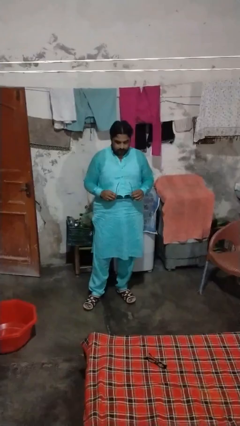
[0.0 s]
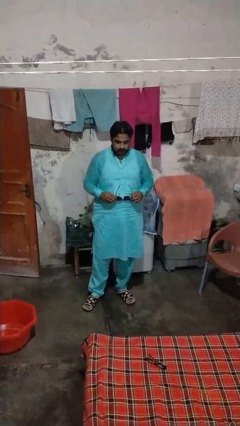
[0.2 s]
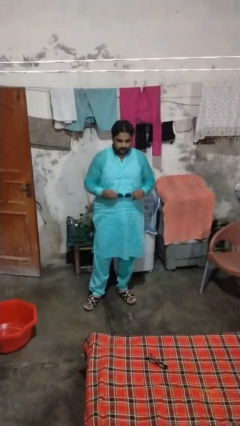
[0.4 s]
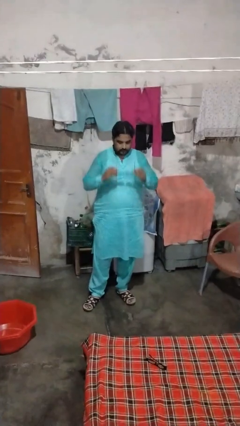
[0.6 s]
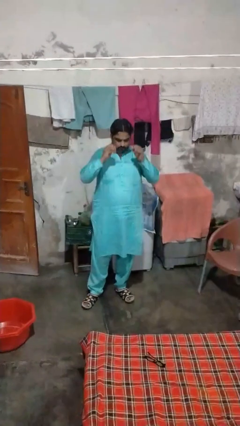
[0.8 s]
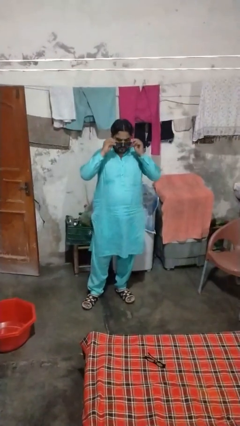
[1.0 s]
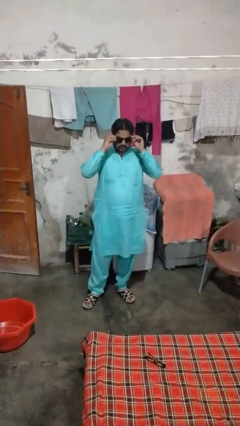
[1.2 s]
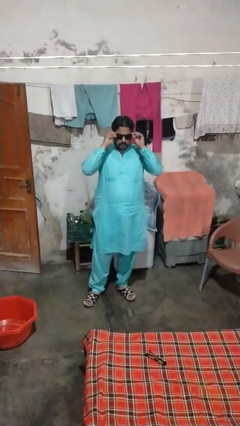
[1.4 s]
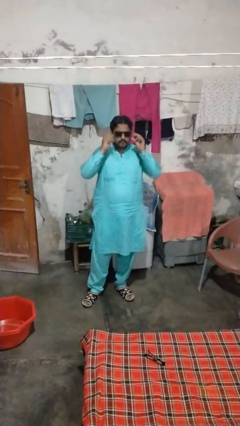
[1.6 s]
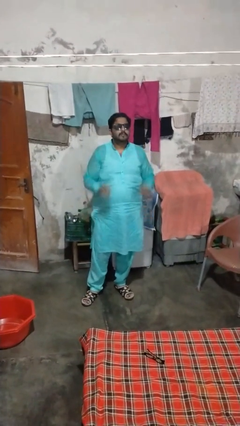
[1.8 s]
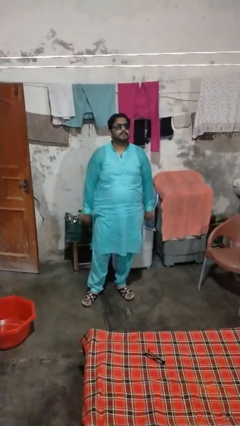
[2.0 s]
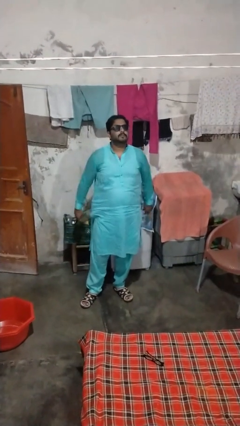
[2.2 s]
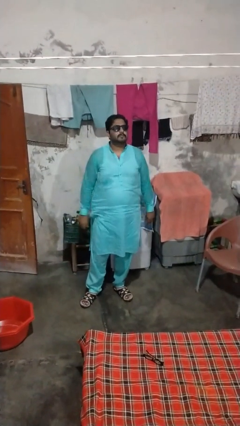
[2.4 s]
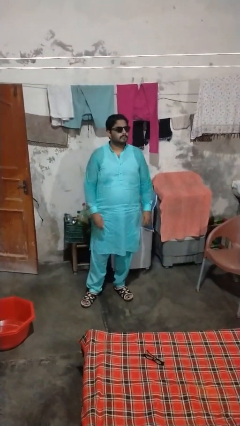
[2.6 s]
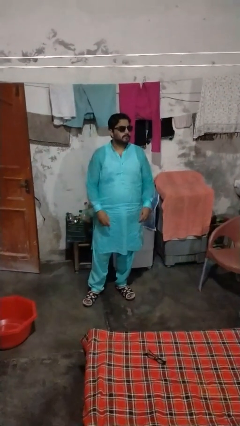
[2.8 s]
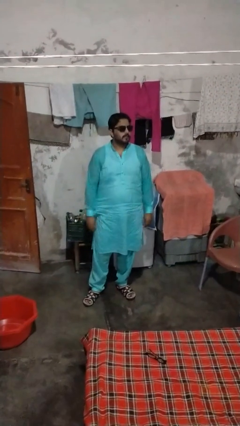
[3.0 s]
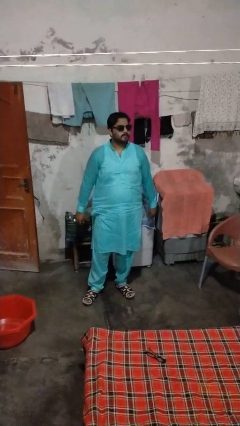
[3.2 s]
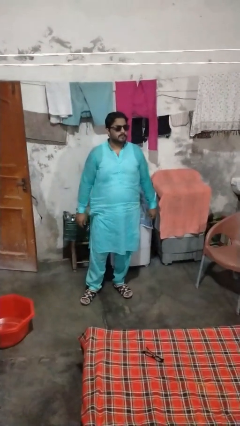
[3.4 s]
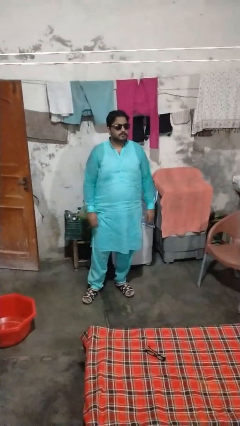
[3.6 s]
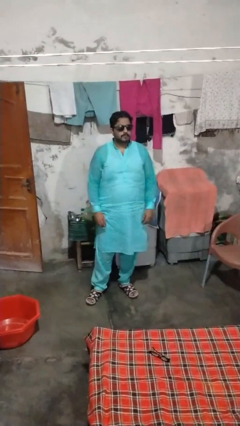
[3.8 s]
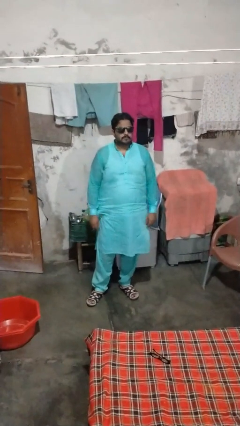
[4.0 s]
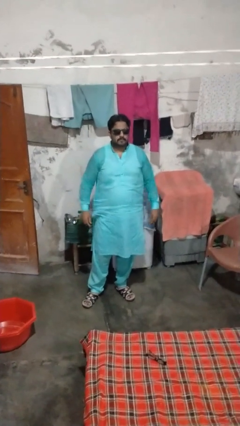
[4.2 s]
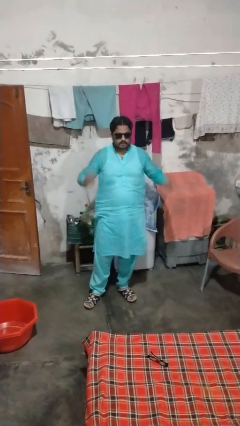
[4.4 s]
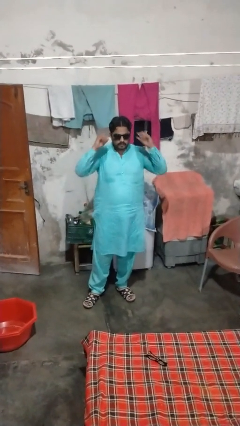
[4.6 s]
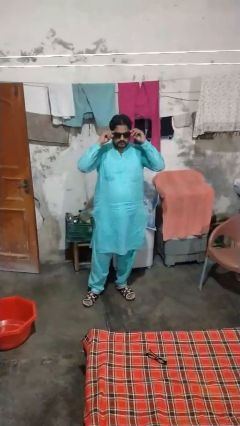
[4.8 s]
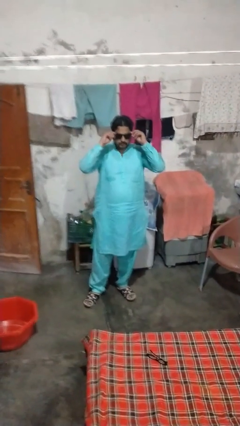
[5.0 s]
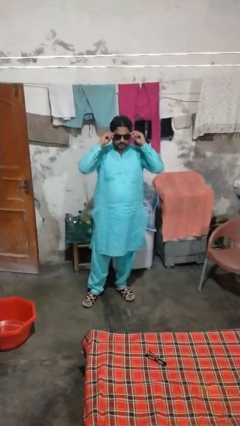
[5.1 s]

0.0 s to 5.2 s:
person puts on sunglasses

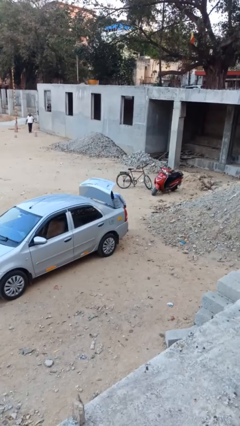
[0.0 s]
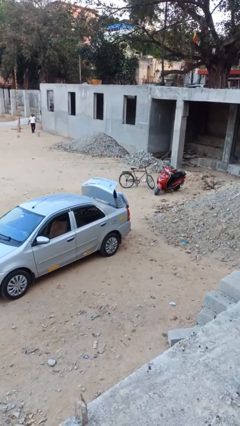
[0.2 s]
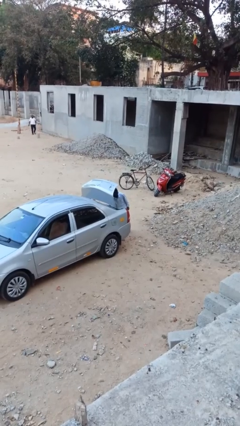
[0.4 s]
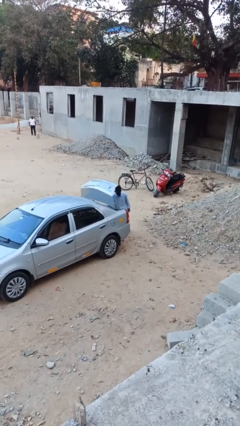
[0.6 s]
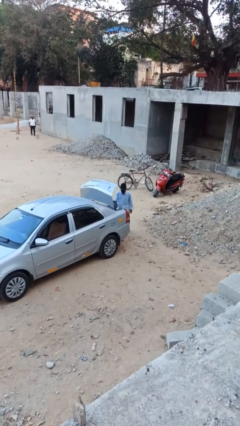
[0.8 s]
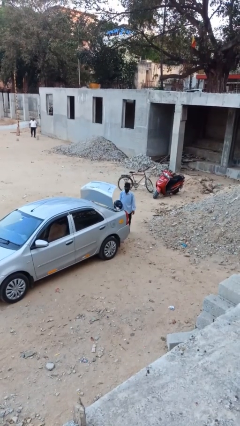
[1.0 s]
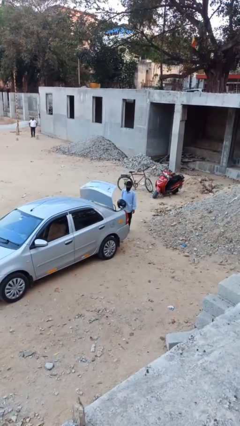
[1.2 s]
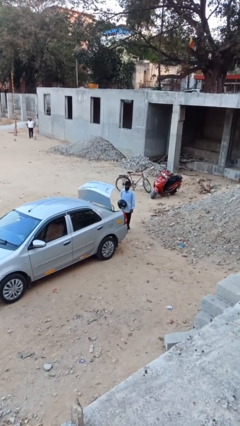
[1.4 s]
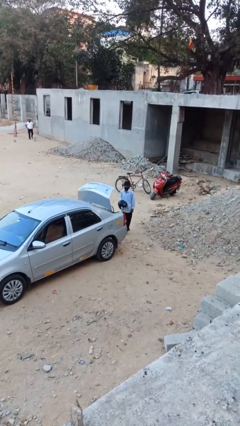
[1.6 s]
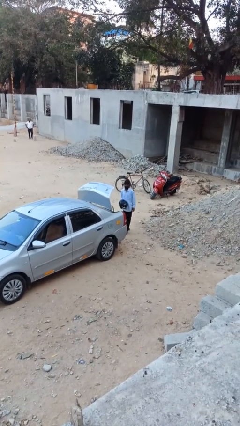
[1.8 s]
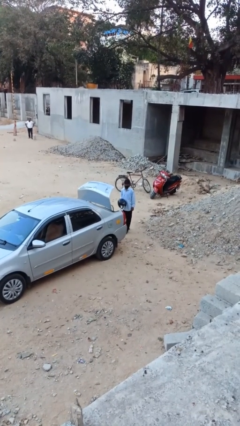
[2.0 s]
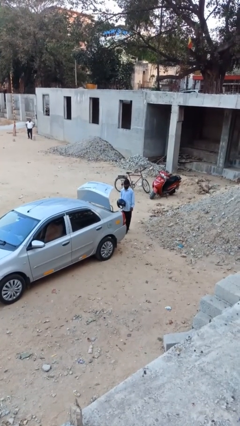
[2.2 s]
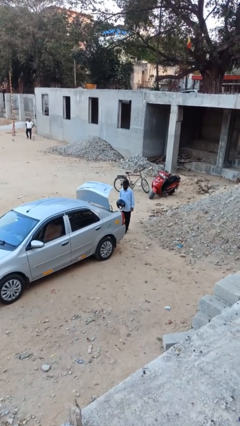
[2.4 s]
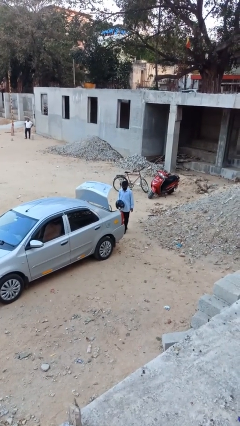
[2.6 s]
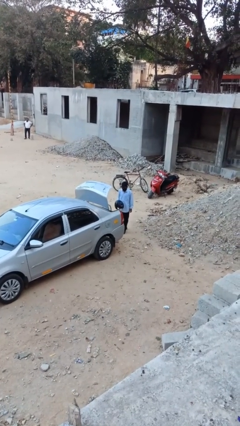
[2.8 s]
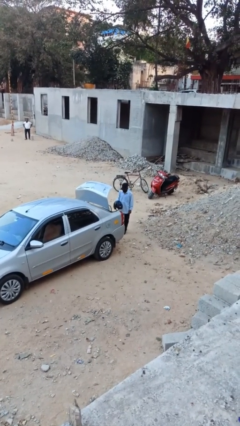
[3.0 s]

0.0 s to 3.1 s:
person unloads car

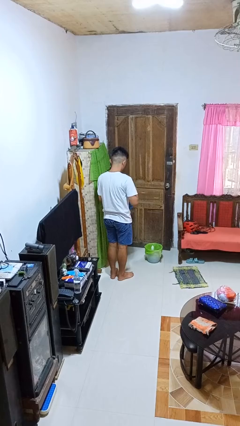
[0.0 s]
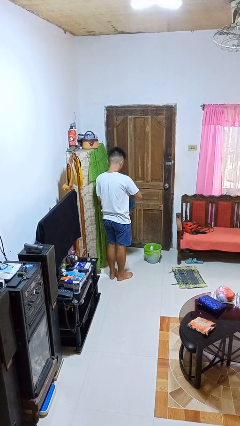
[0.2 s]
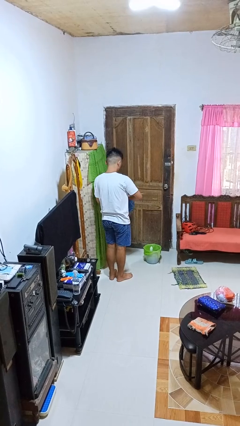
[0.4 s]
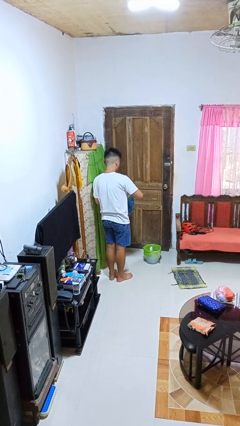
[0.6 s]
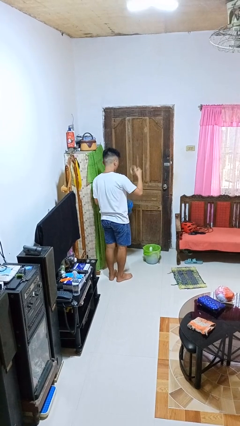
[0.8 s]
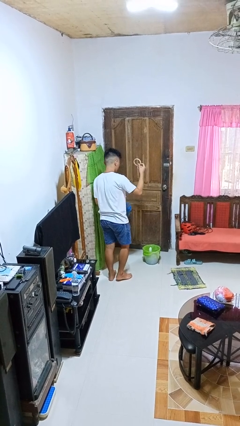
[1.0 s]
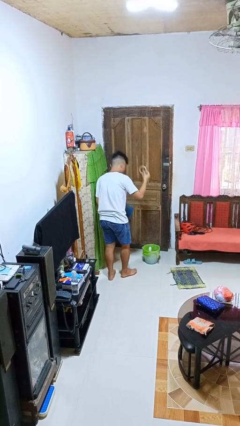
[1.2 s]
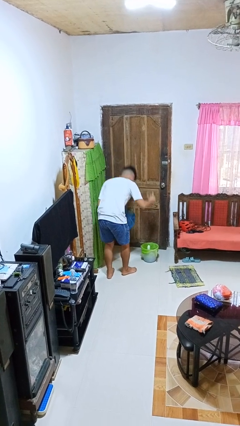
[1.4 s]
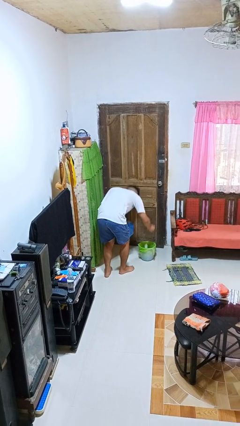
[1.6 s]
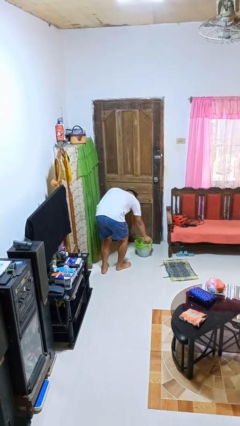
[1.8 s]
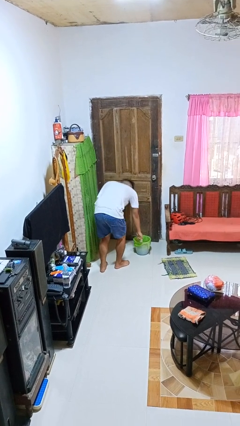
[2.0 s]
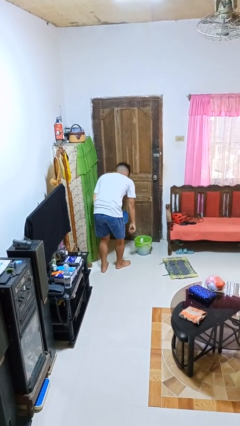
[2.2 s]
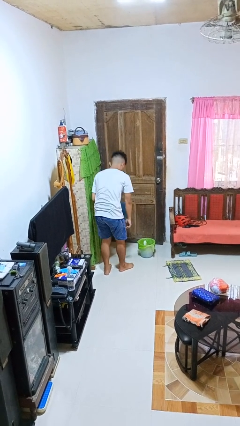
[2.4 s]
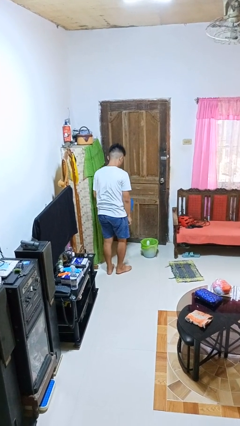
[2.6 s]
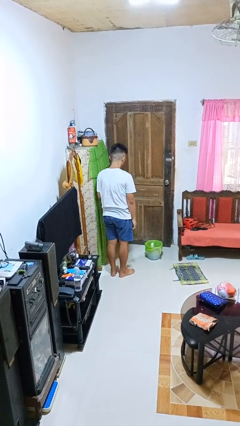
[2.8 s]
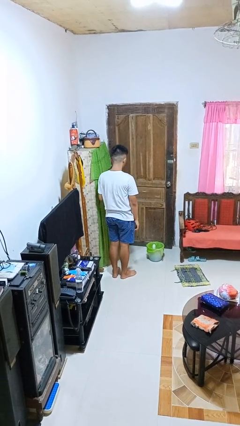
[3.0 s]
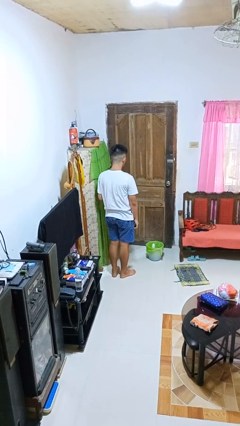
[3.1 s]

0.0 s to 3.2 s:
person discards trash

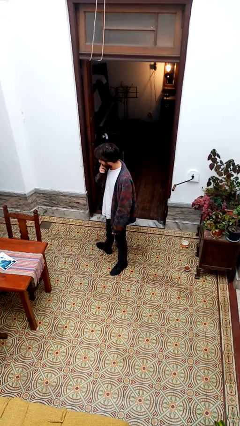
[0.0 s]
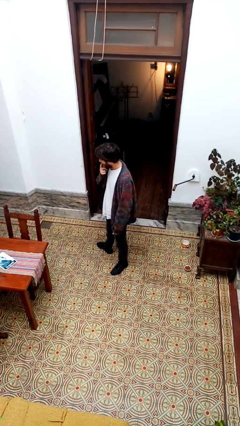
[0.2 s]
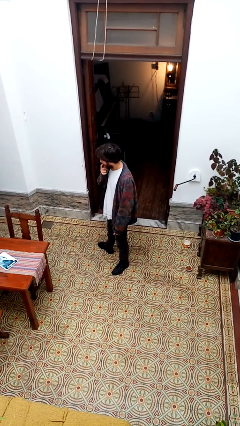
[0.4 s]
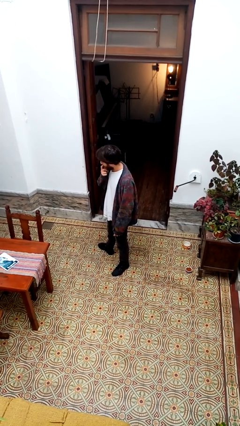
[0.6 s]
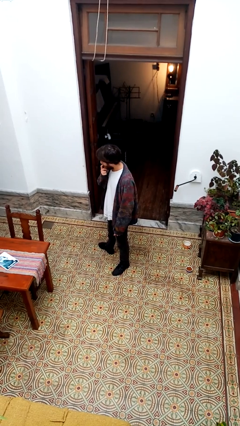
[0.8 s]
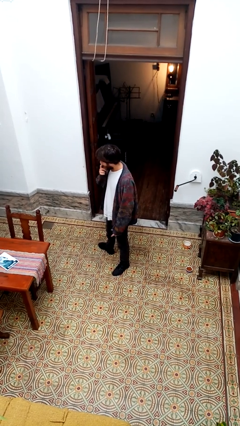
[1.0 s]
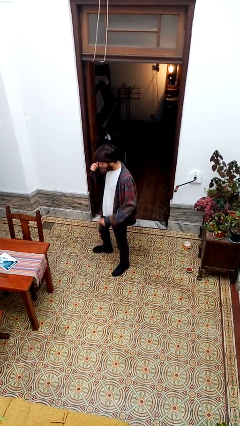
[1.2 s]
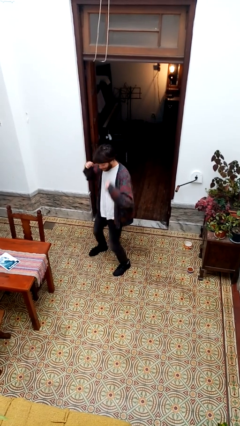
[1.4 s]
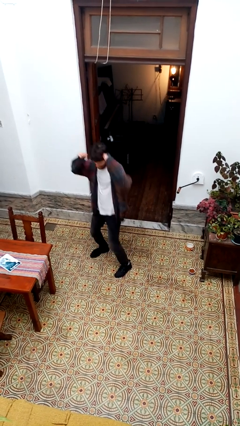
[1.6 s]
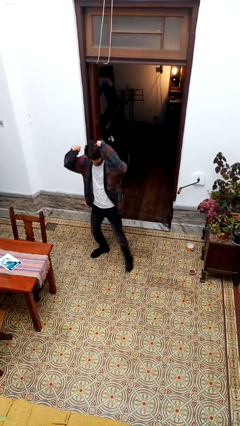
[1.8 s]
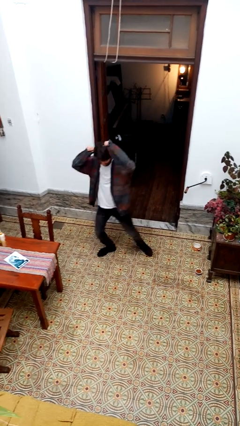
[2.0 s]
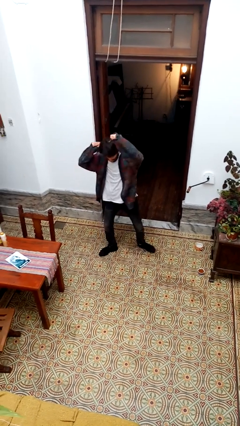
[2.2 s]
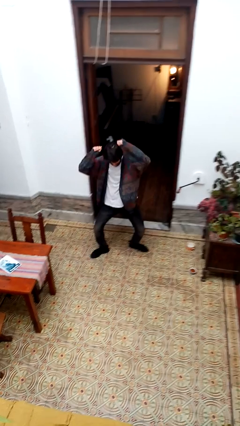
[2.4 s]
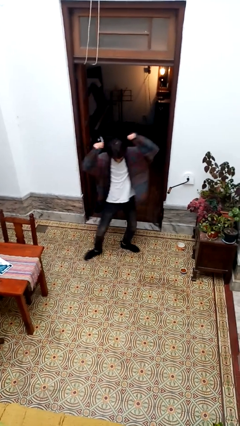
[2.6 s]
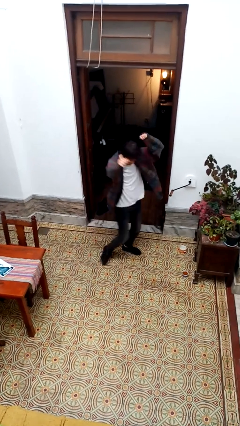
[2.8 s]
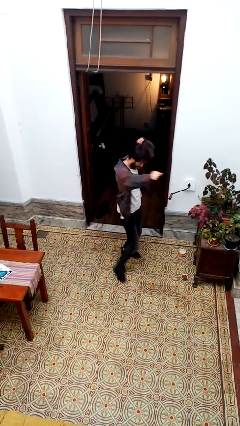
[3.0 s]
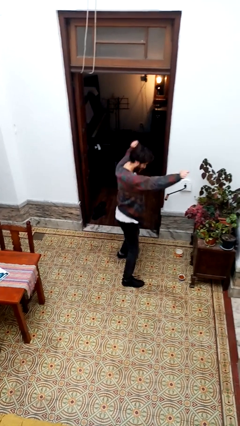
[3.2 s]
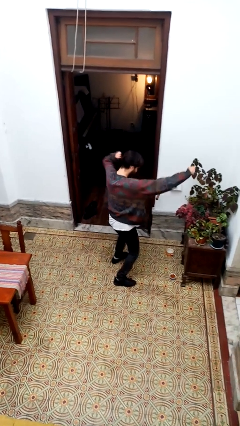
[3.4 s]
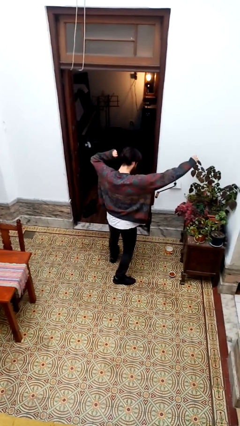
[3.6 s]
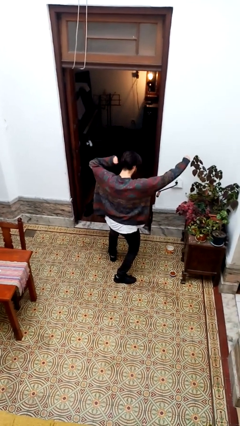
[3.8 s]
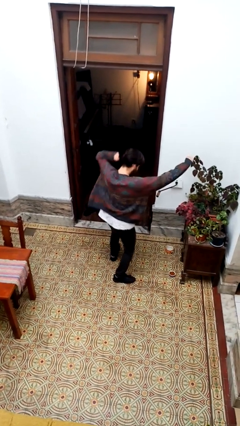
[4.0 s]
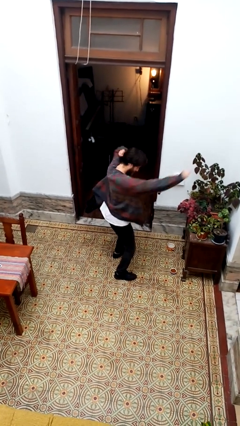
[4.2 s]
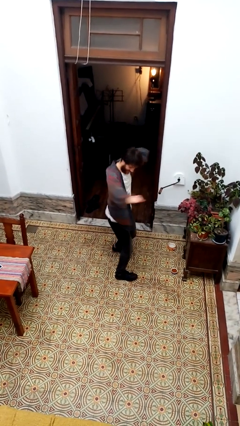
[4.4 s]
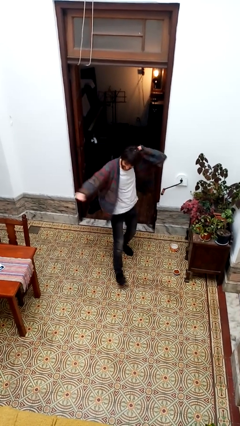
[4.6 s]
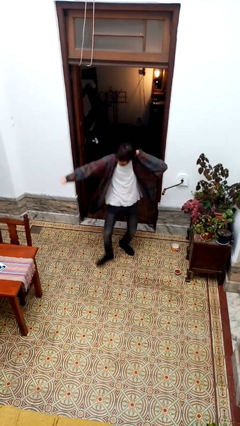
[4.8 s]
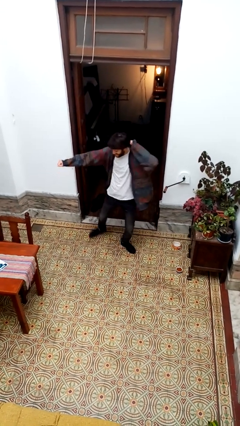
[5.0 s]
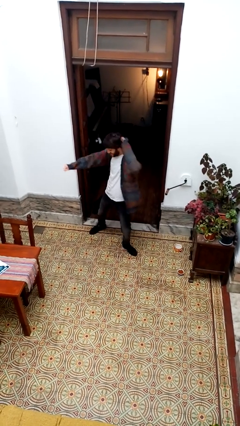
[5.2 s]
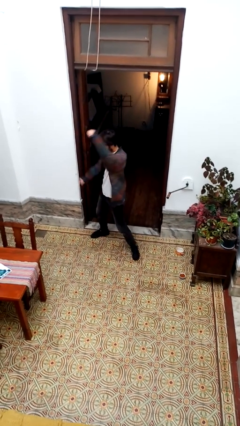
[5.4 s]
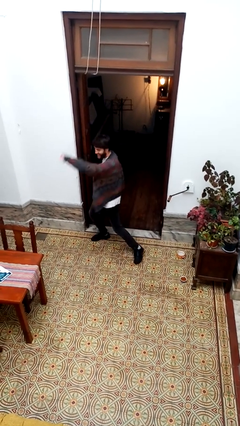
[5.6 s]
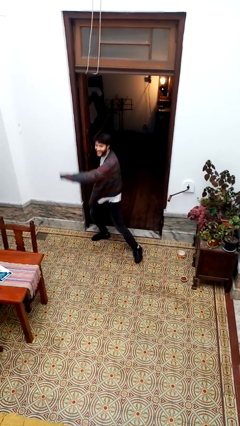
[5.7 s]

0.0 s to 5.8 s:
person dances in place

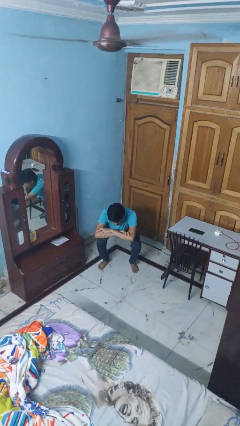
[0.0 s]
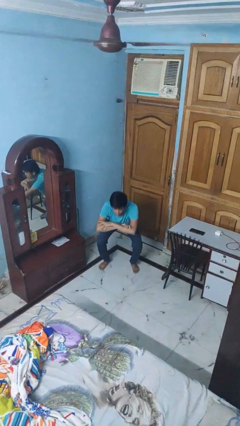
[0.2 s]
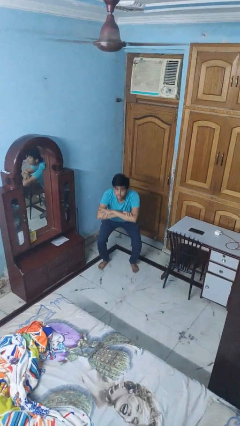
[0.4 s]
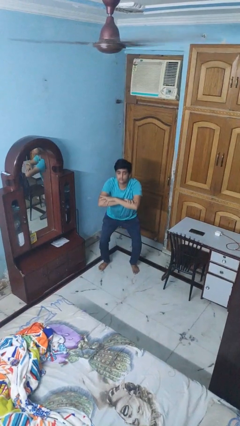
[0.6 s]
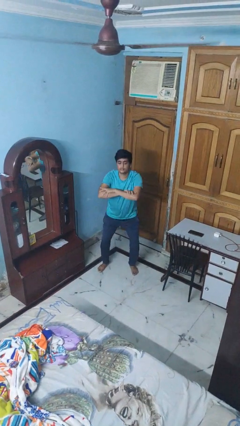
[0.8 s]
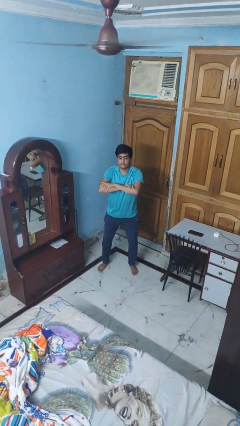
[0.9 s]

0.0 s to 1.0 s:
person stands up
